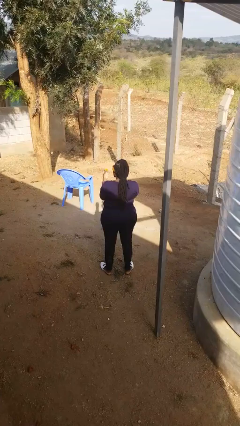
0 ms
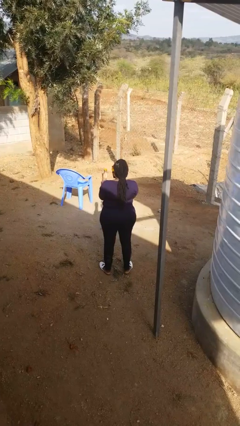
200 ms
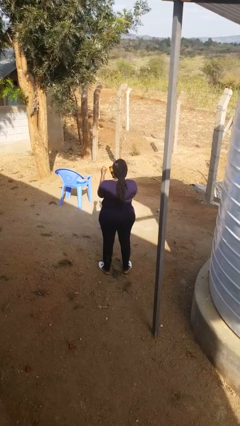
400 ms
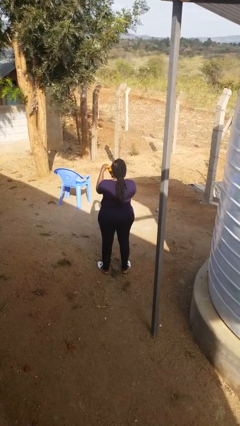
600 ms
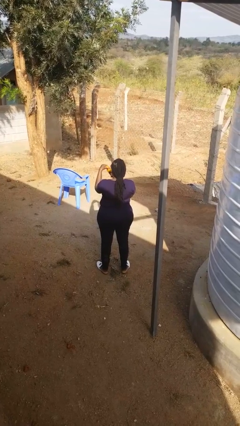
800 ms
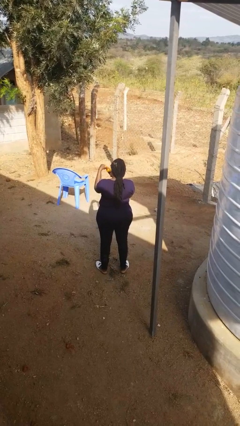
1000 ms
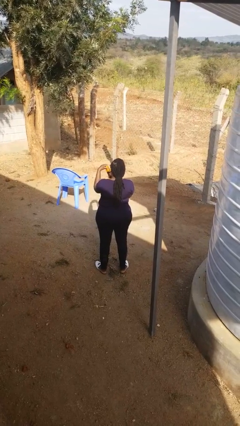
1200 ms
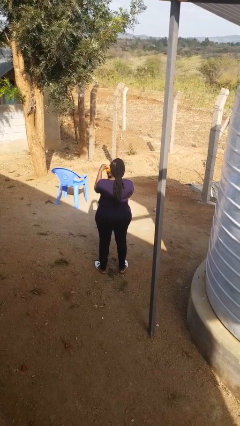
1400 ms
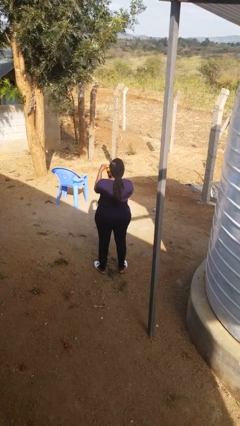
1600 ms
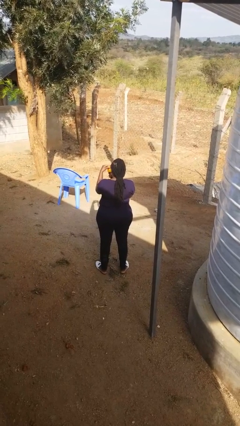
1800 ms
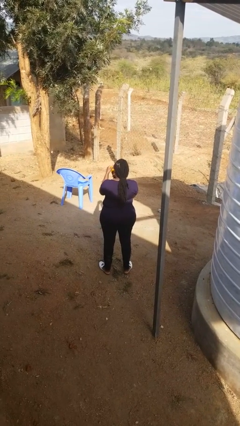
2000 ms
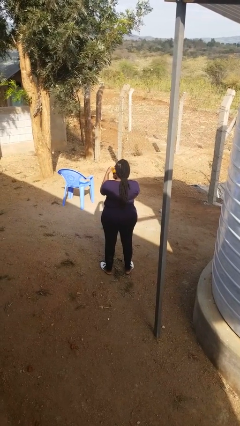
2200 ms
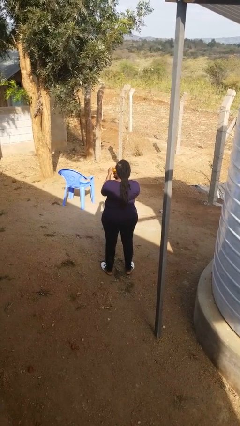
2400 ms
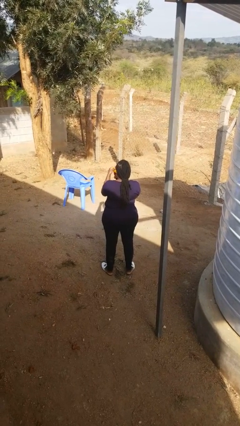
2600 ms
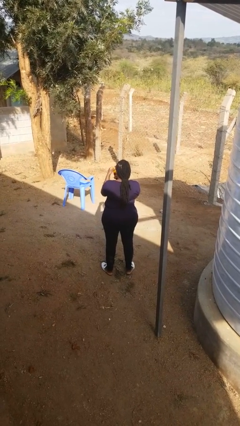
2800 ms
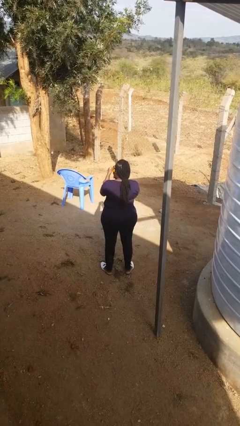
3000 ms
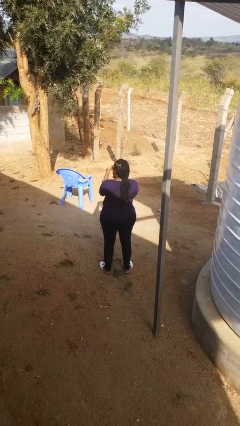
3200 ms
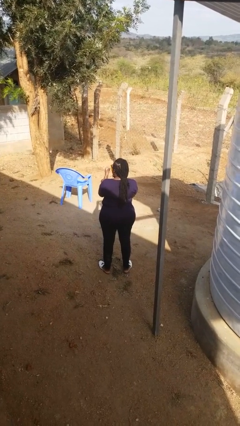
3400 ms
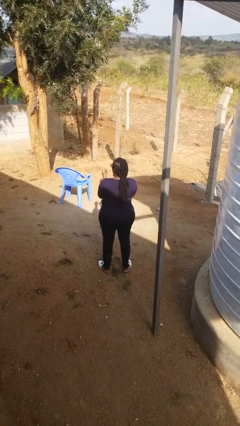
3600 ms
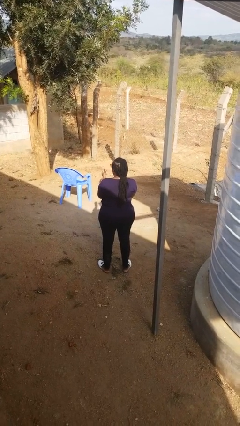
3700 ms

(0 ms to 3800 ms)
person closes jar

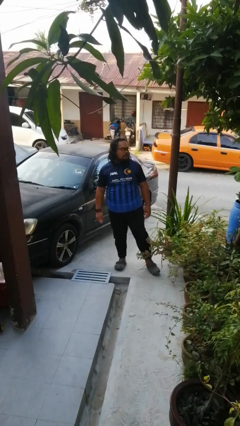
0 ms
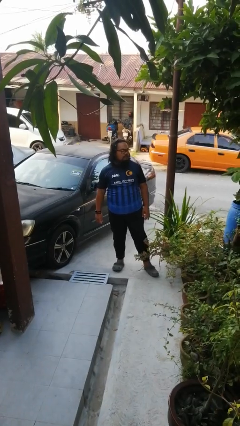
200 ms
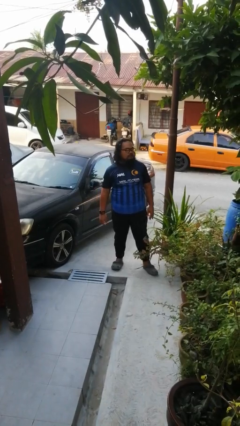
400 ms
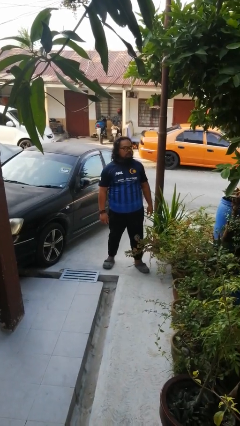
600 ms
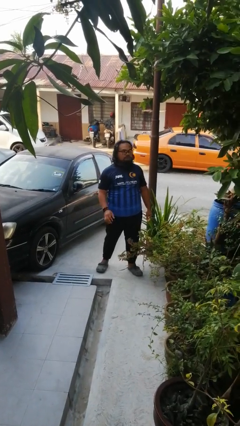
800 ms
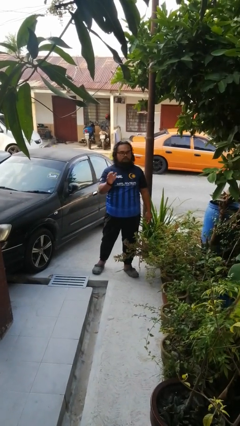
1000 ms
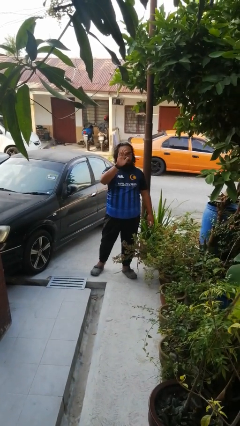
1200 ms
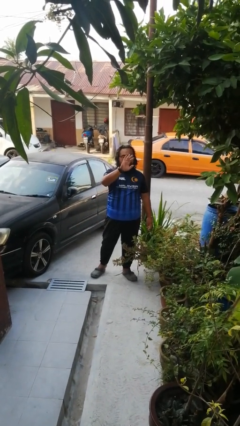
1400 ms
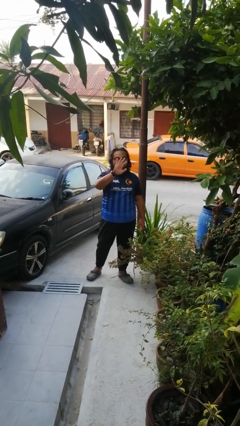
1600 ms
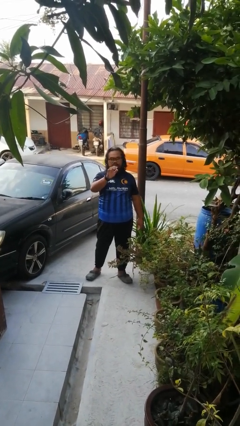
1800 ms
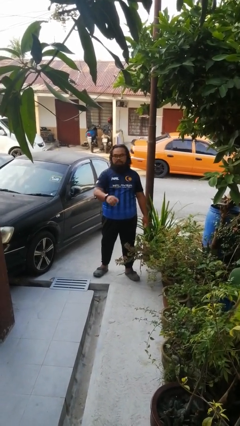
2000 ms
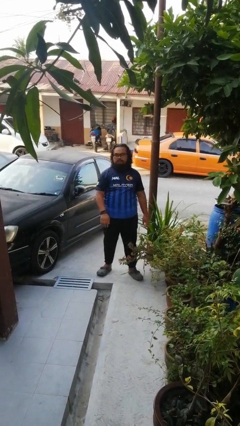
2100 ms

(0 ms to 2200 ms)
person waves at person

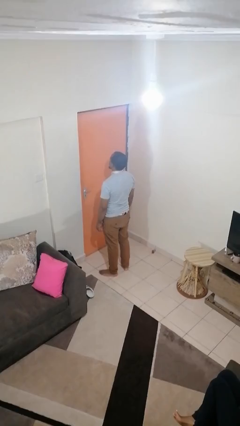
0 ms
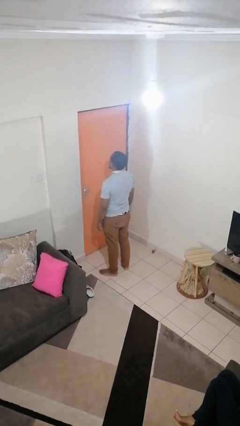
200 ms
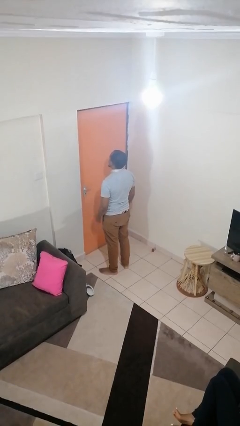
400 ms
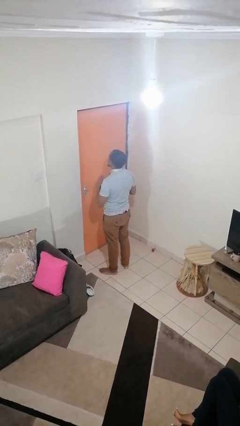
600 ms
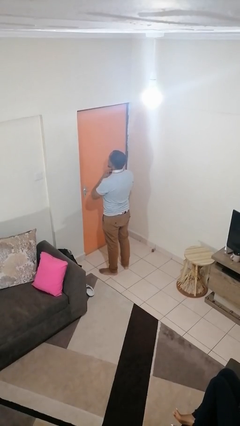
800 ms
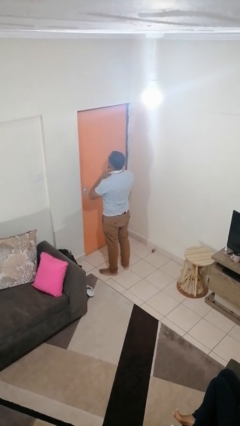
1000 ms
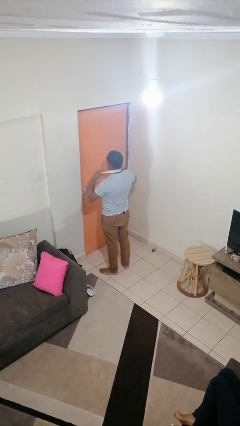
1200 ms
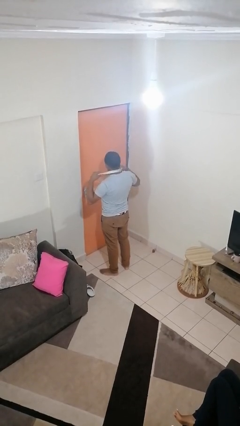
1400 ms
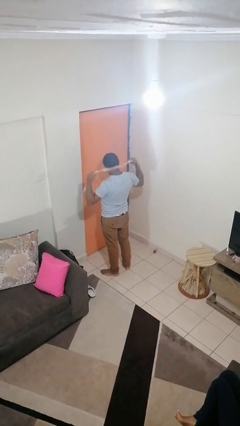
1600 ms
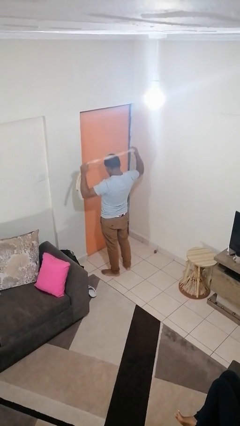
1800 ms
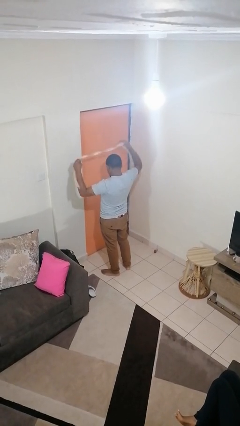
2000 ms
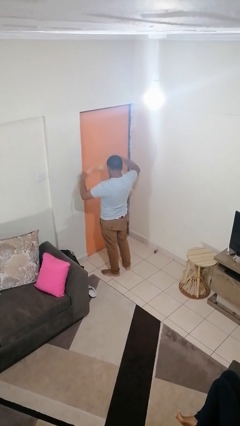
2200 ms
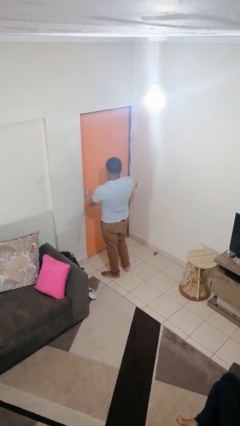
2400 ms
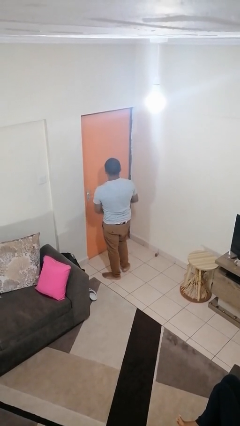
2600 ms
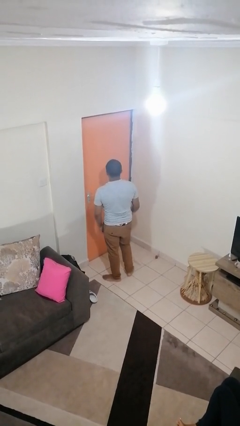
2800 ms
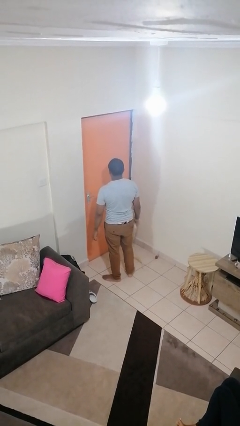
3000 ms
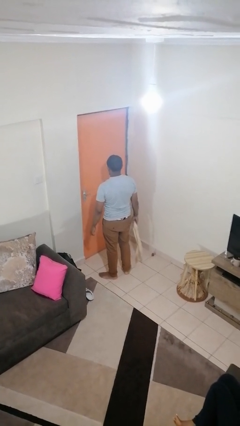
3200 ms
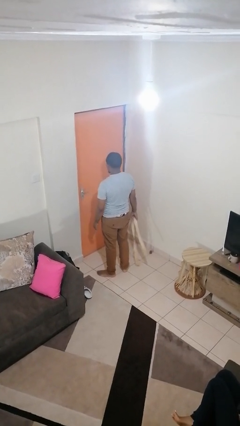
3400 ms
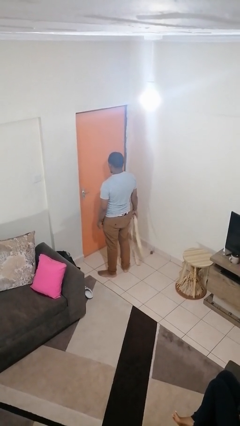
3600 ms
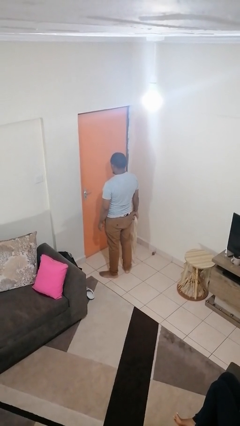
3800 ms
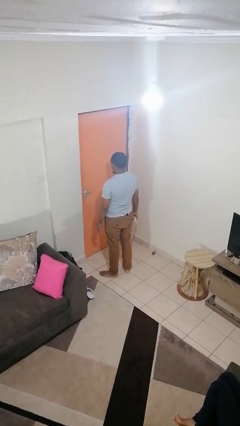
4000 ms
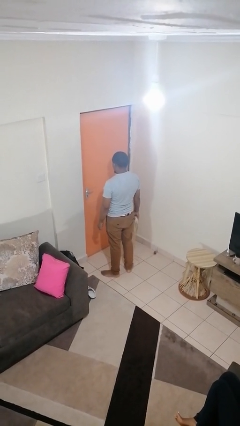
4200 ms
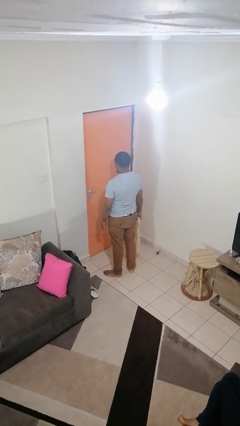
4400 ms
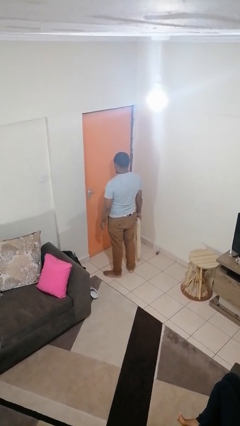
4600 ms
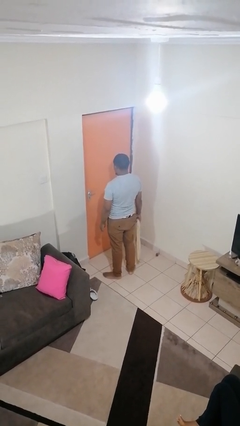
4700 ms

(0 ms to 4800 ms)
person takes off necktie

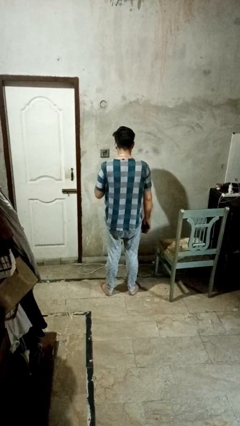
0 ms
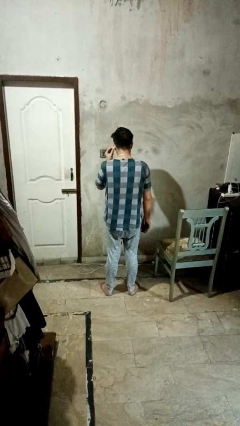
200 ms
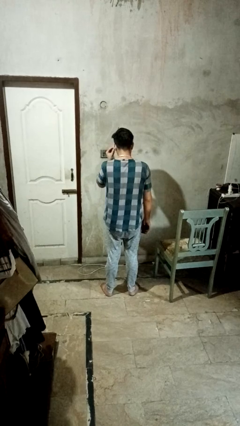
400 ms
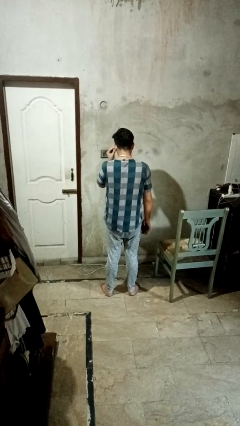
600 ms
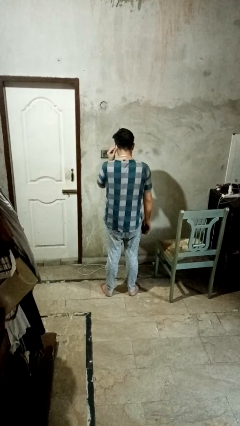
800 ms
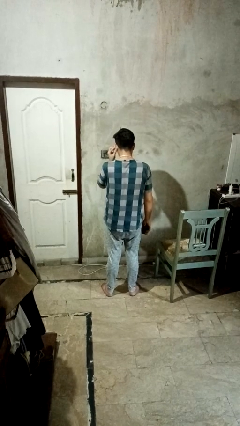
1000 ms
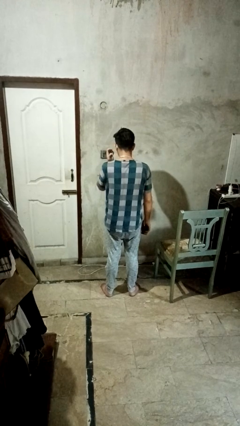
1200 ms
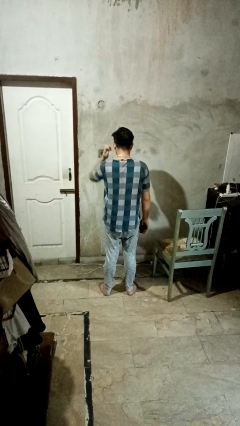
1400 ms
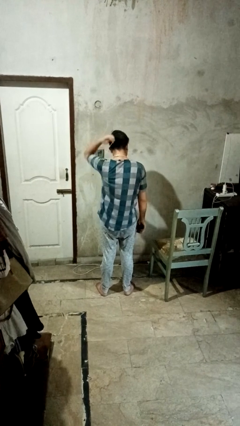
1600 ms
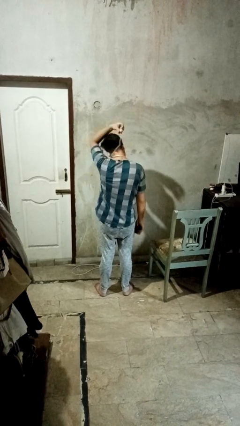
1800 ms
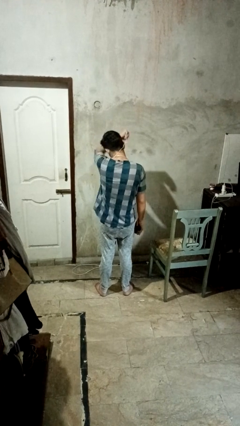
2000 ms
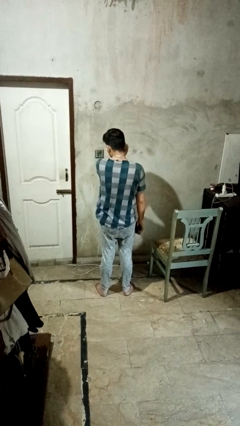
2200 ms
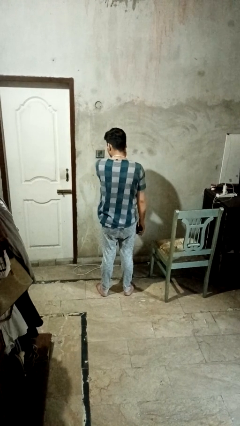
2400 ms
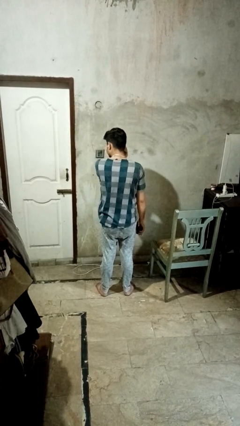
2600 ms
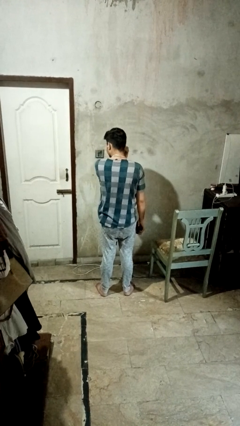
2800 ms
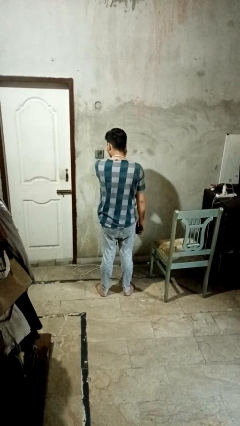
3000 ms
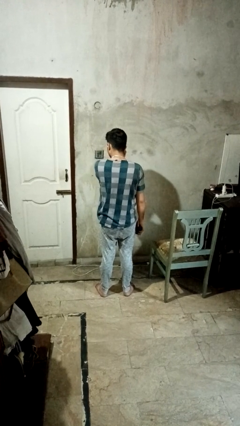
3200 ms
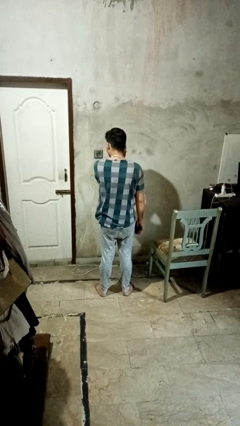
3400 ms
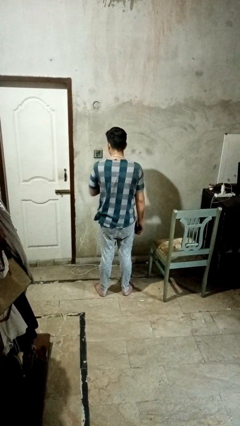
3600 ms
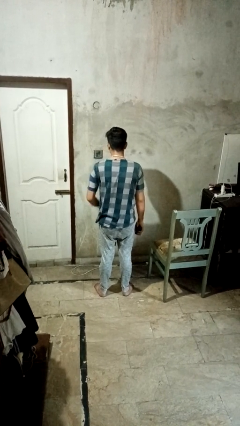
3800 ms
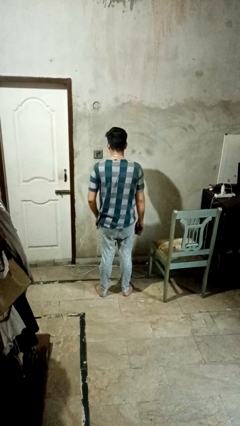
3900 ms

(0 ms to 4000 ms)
person puts on headphones

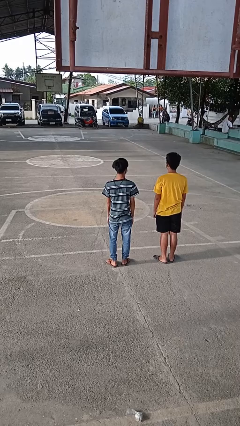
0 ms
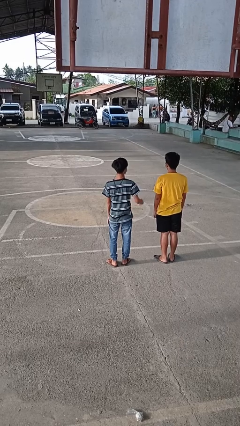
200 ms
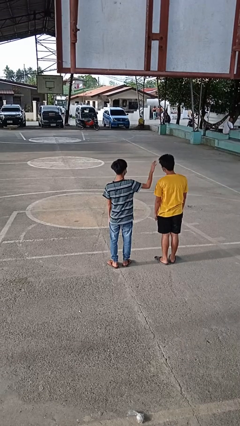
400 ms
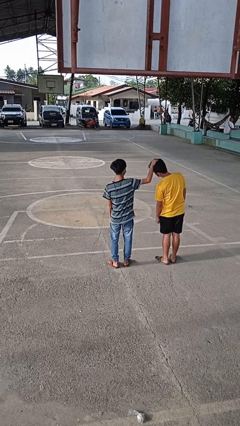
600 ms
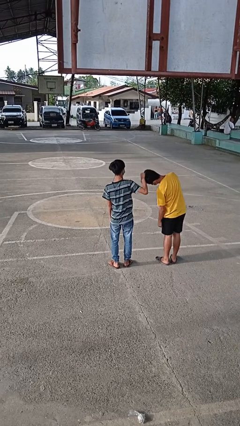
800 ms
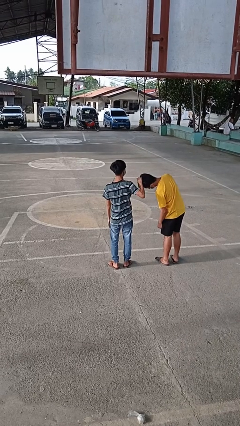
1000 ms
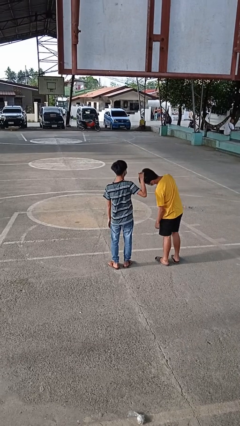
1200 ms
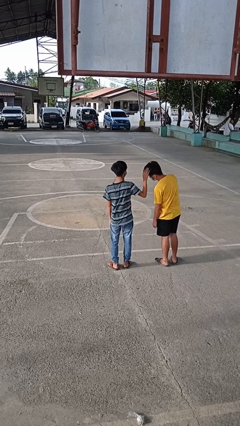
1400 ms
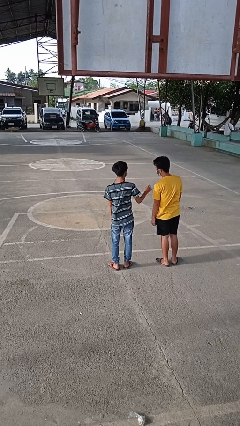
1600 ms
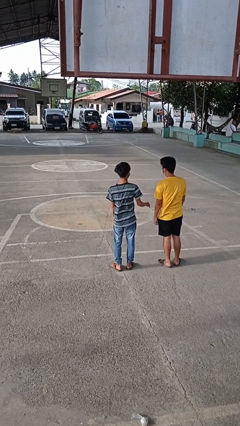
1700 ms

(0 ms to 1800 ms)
person grabs person by hair

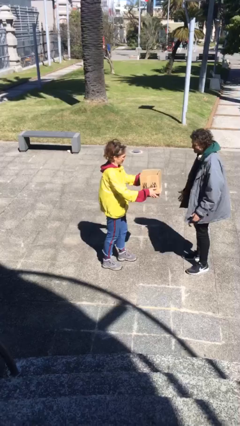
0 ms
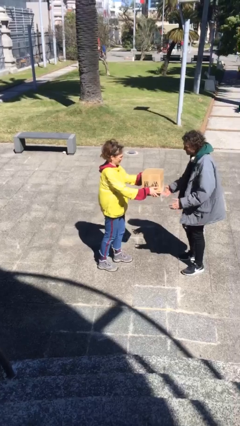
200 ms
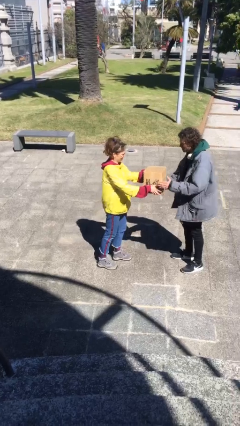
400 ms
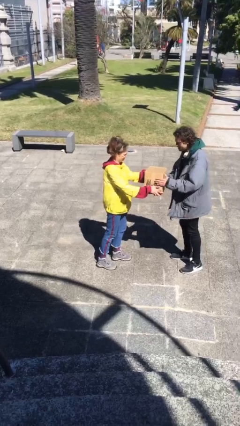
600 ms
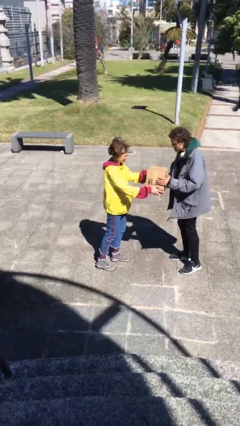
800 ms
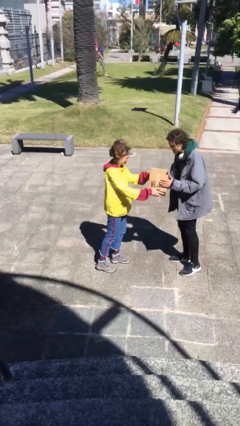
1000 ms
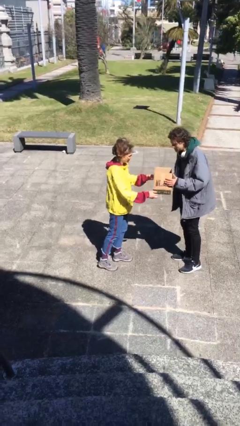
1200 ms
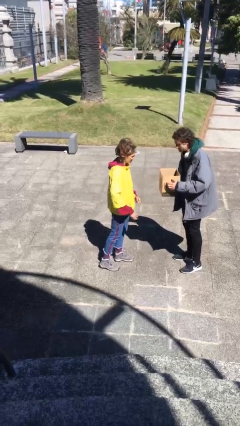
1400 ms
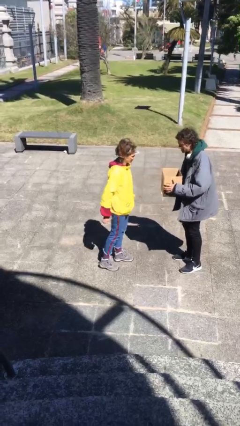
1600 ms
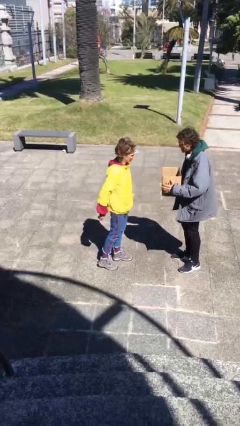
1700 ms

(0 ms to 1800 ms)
person transfers object to person
